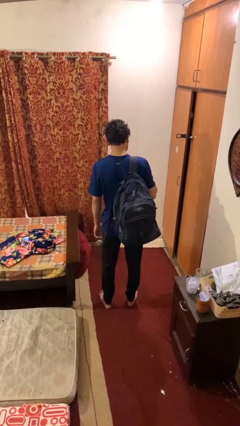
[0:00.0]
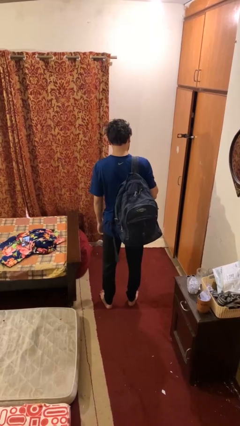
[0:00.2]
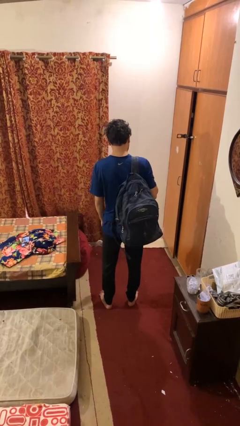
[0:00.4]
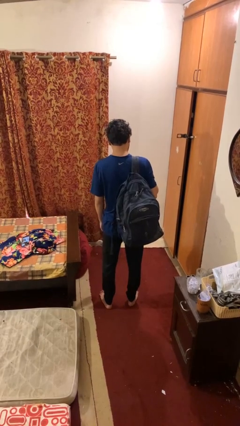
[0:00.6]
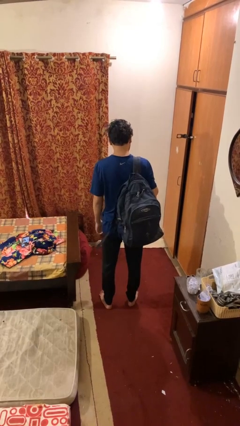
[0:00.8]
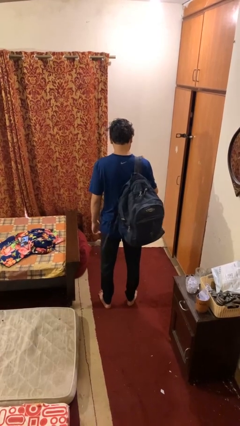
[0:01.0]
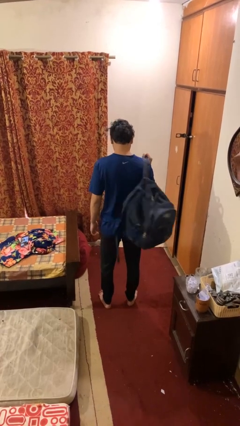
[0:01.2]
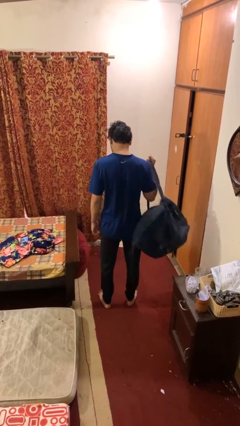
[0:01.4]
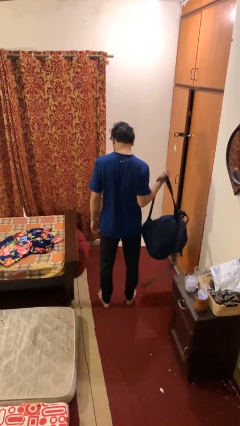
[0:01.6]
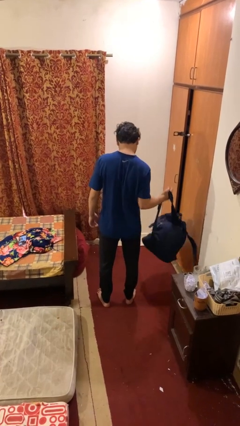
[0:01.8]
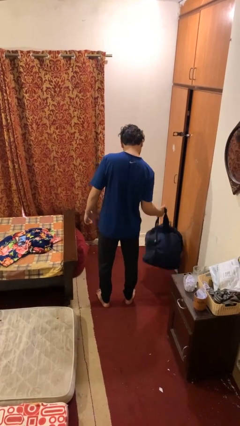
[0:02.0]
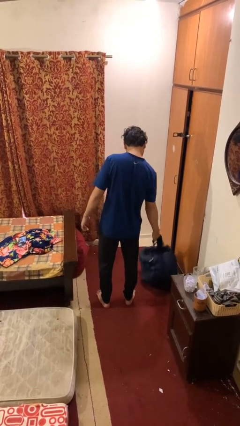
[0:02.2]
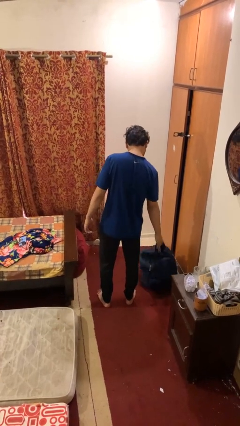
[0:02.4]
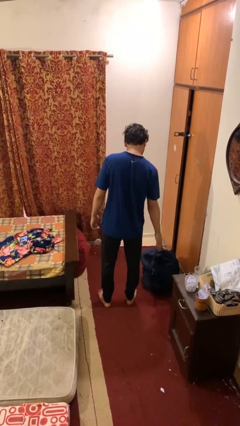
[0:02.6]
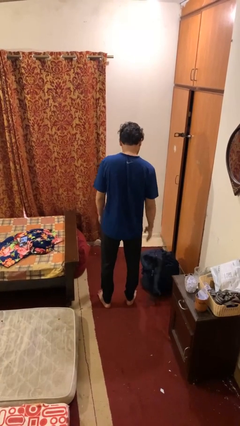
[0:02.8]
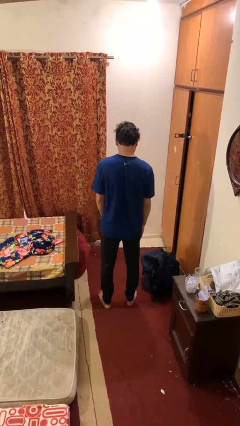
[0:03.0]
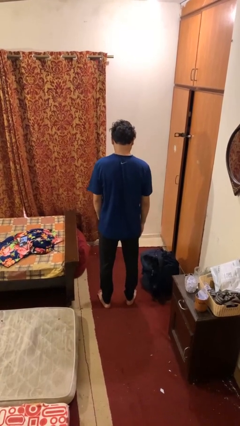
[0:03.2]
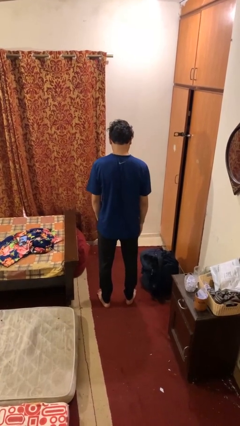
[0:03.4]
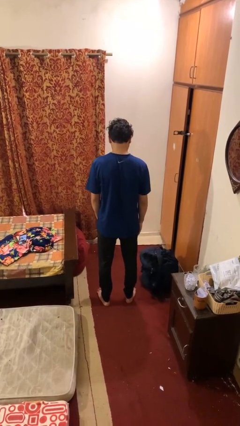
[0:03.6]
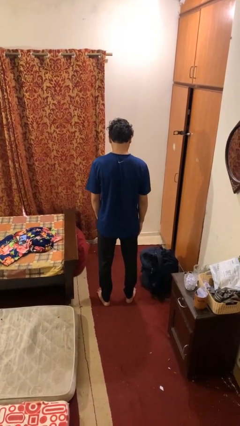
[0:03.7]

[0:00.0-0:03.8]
person takes off backpack

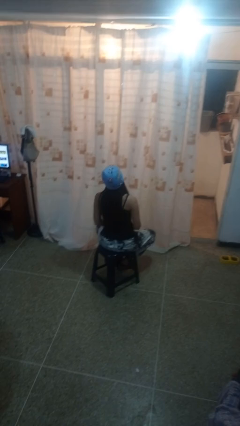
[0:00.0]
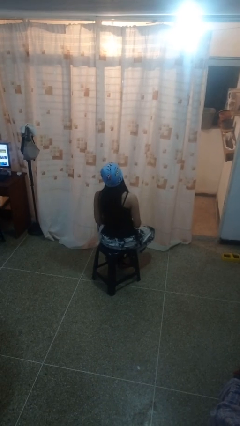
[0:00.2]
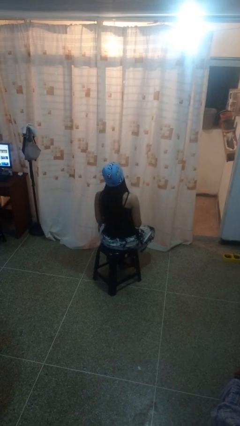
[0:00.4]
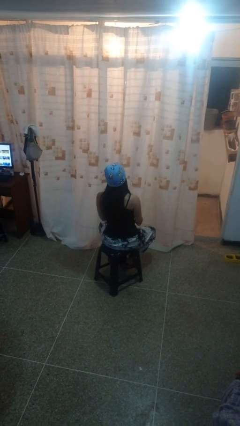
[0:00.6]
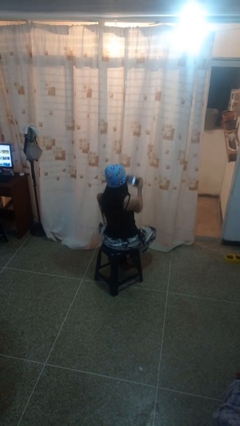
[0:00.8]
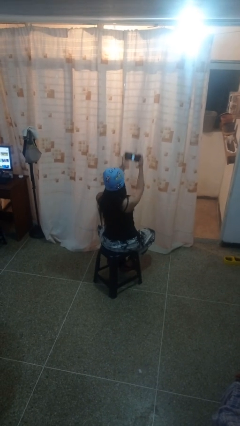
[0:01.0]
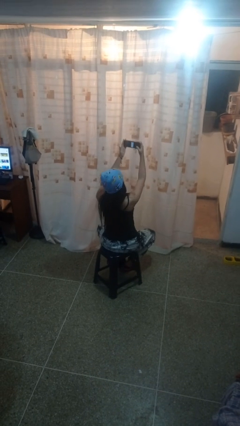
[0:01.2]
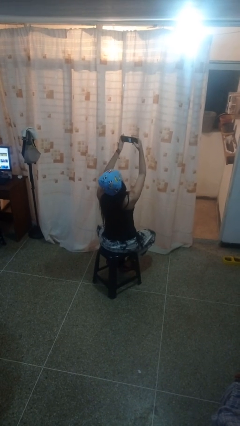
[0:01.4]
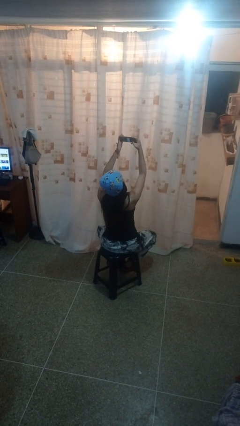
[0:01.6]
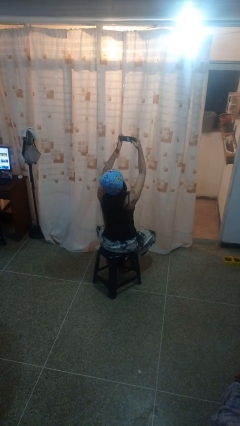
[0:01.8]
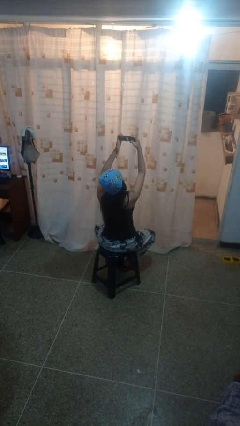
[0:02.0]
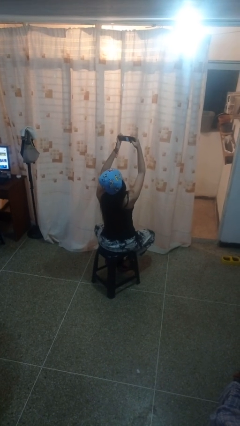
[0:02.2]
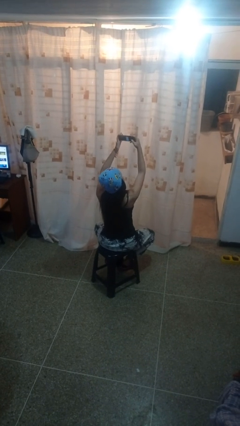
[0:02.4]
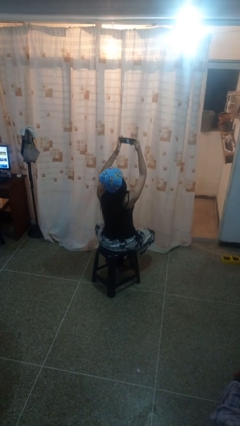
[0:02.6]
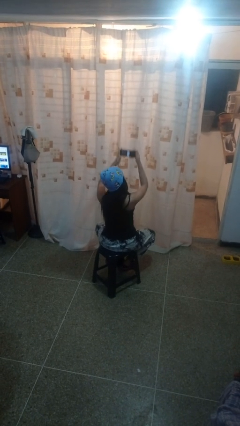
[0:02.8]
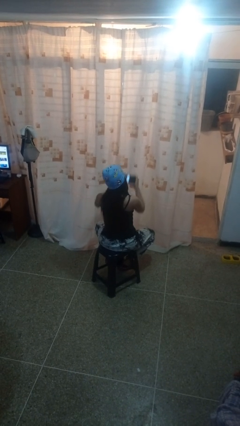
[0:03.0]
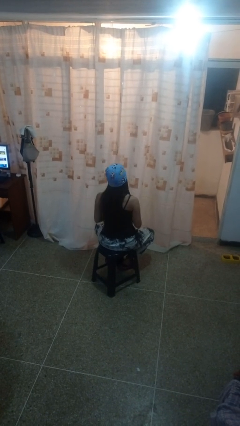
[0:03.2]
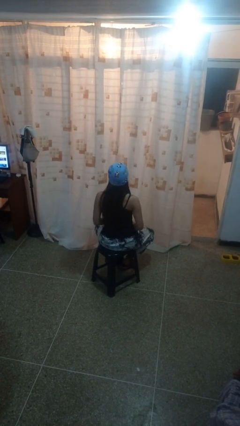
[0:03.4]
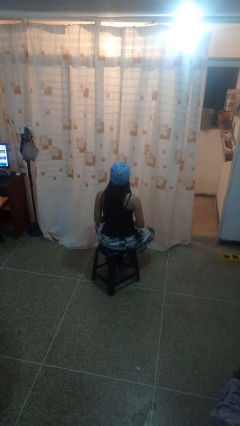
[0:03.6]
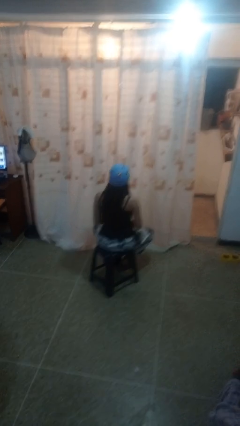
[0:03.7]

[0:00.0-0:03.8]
person takes selfie

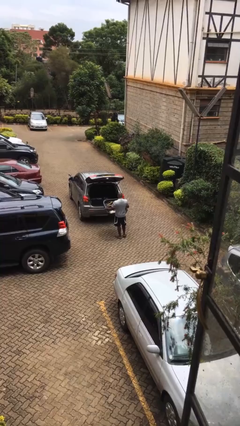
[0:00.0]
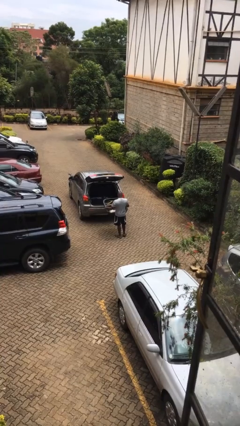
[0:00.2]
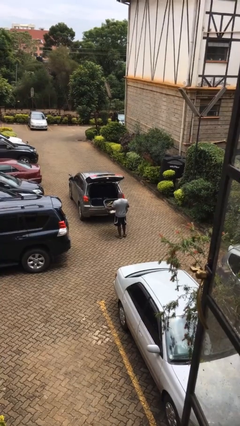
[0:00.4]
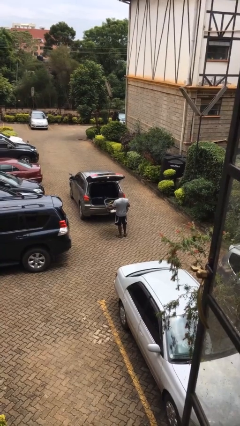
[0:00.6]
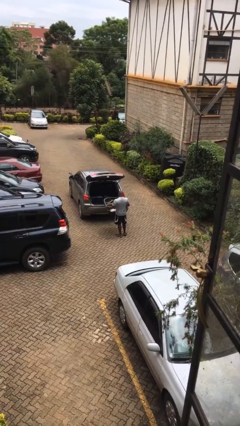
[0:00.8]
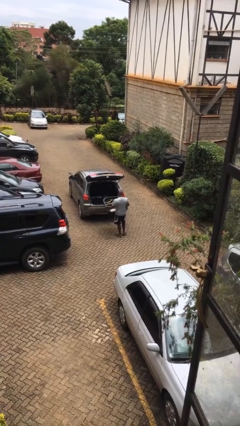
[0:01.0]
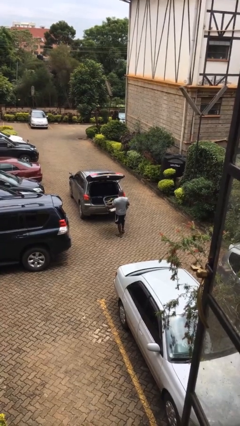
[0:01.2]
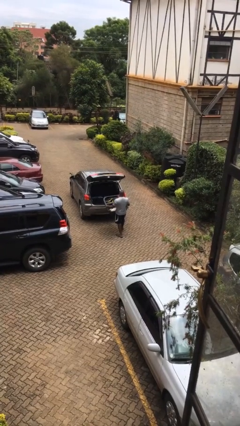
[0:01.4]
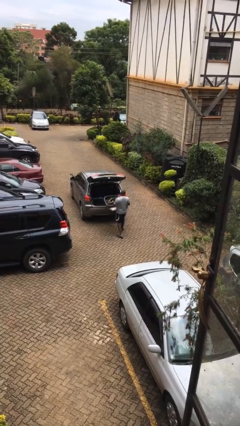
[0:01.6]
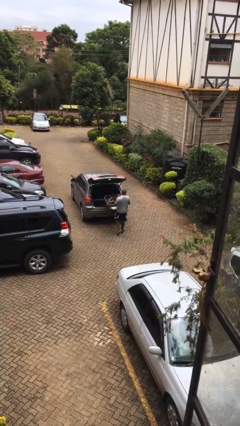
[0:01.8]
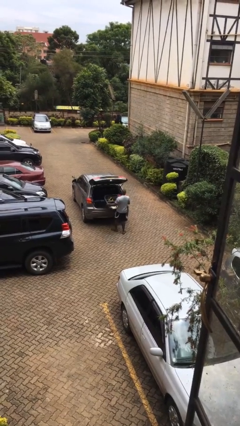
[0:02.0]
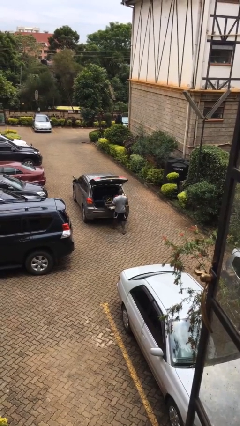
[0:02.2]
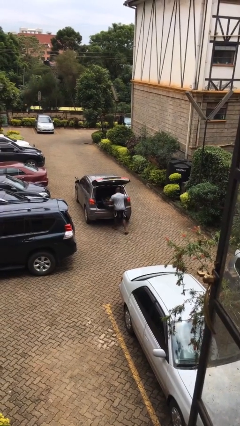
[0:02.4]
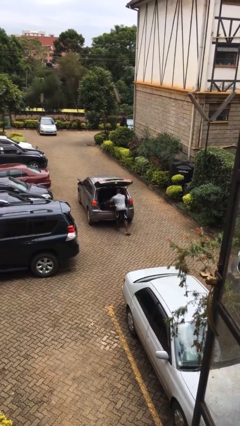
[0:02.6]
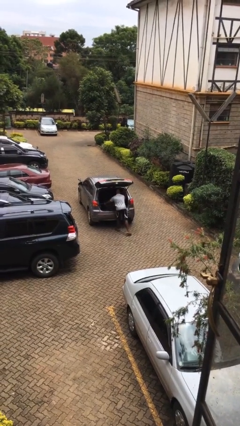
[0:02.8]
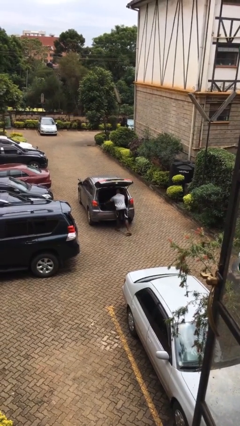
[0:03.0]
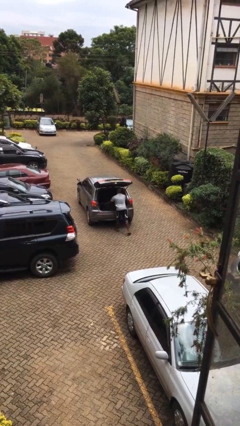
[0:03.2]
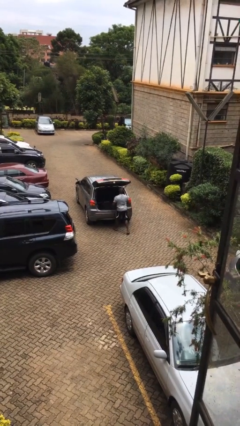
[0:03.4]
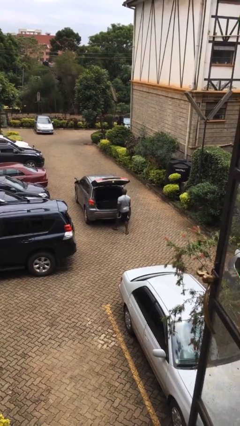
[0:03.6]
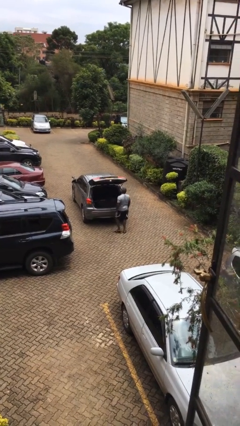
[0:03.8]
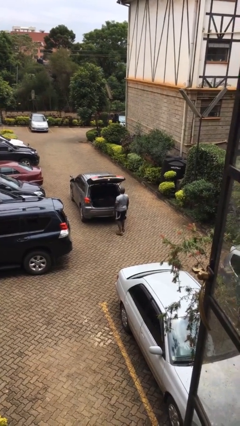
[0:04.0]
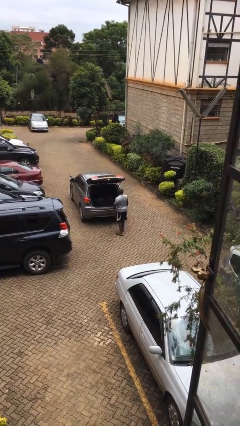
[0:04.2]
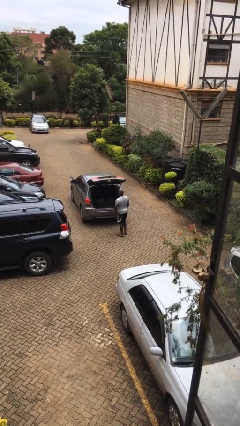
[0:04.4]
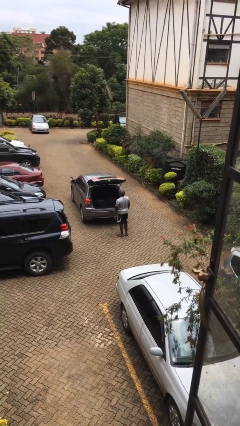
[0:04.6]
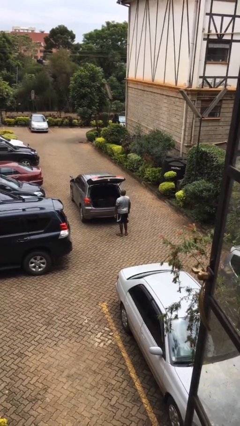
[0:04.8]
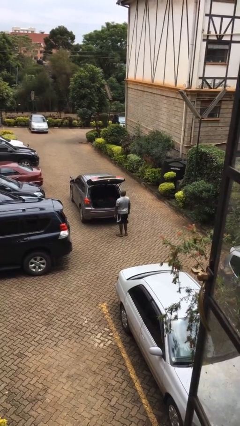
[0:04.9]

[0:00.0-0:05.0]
person loads car

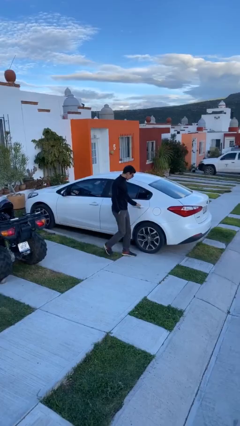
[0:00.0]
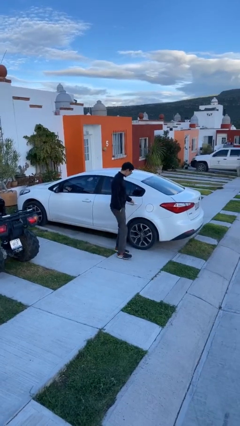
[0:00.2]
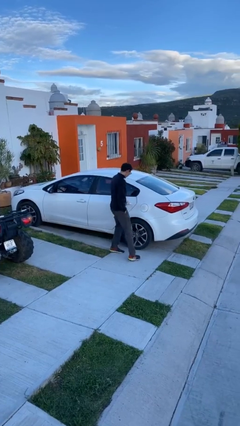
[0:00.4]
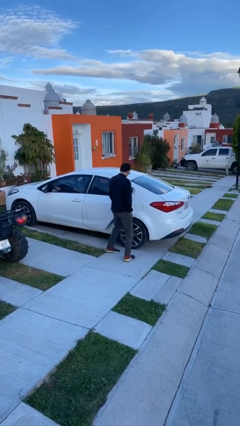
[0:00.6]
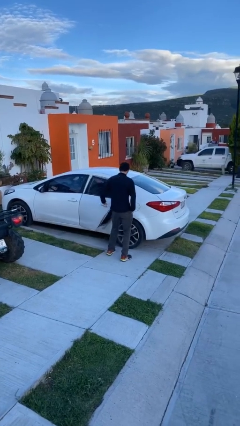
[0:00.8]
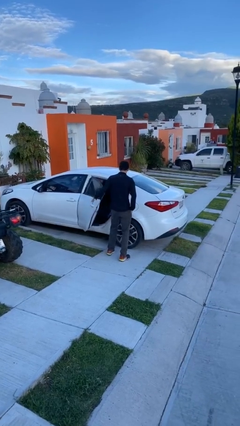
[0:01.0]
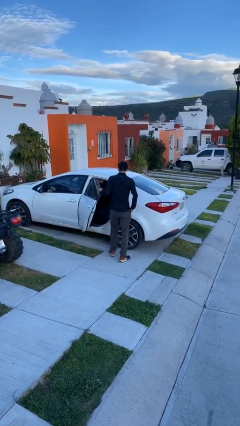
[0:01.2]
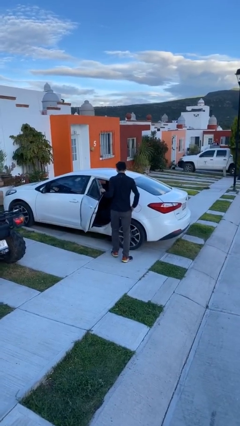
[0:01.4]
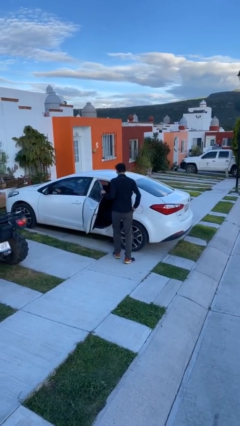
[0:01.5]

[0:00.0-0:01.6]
person opens car door

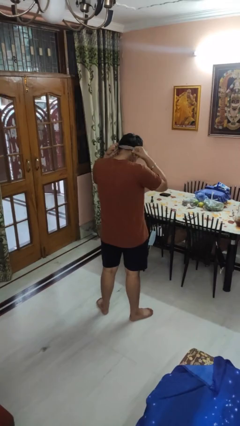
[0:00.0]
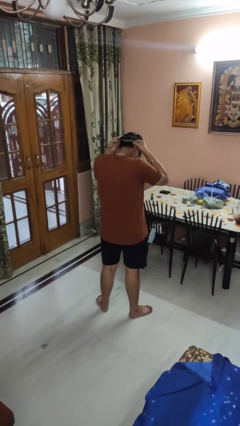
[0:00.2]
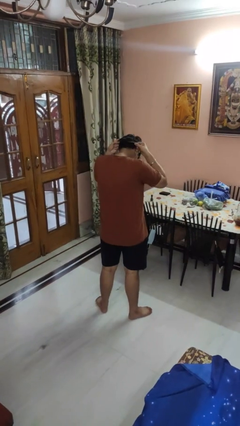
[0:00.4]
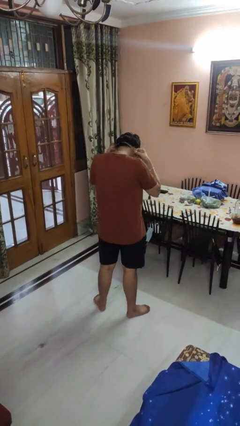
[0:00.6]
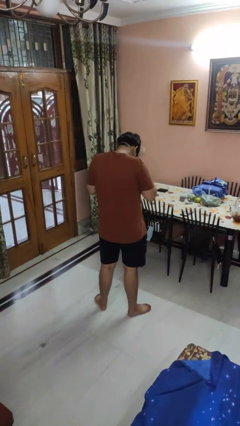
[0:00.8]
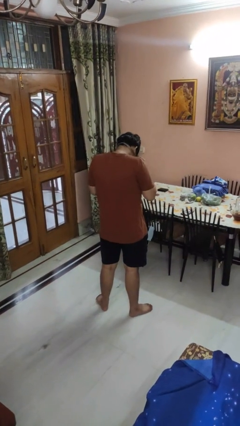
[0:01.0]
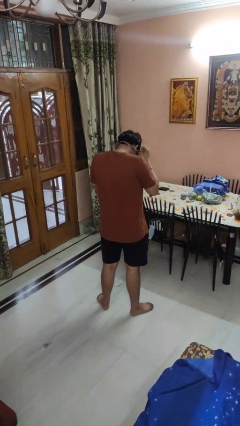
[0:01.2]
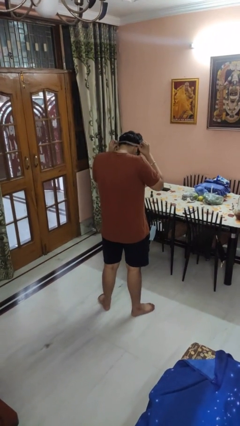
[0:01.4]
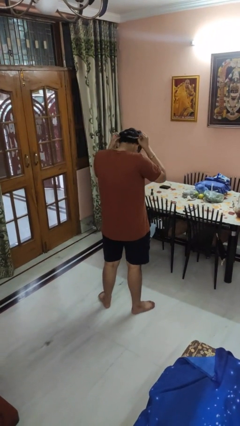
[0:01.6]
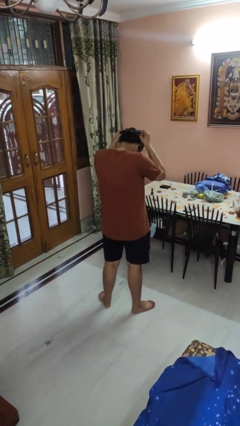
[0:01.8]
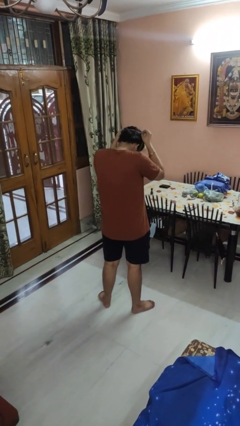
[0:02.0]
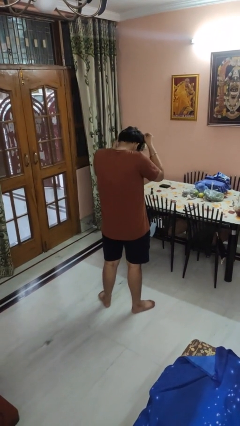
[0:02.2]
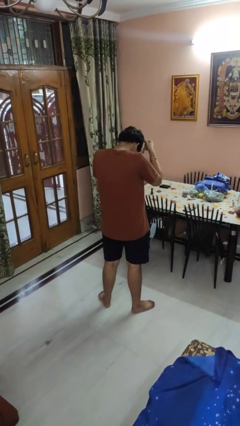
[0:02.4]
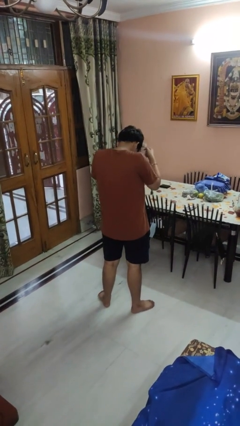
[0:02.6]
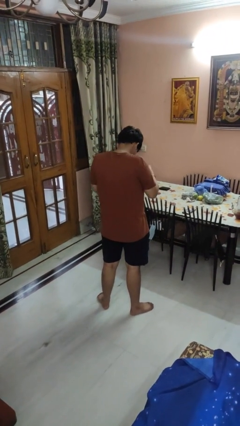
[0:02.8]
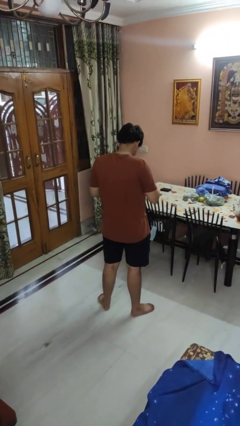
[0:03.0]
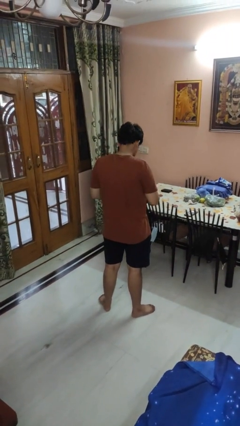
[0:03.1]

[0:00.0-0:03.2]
person takes off necktie
